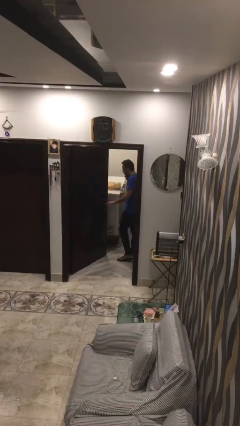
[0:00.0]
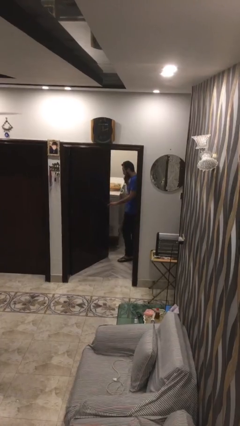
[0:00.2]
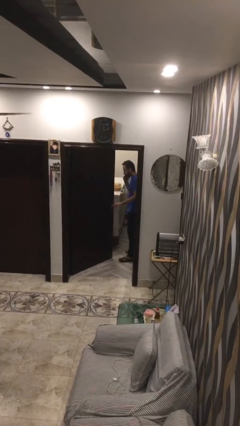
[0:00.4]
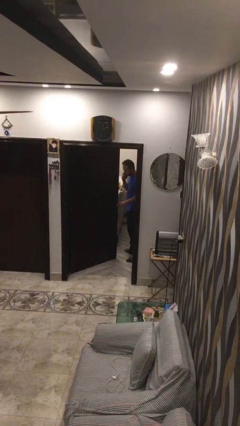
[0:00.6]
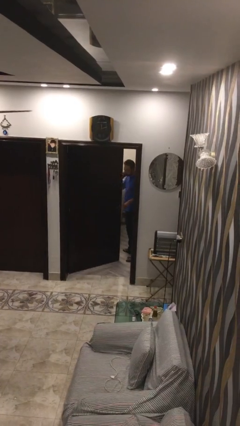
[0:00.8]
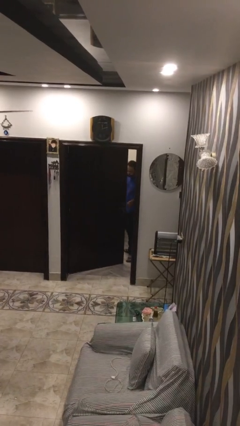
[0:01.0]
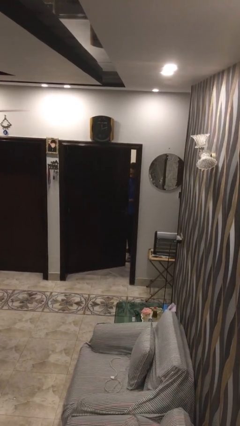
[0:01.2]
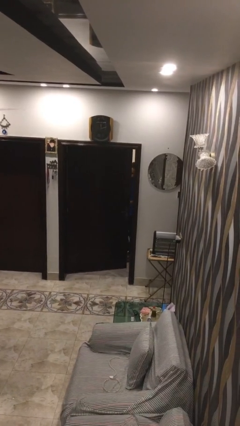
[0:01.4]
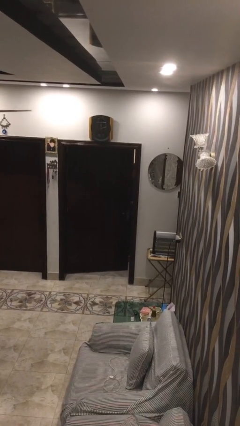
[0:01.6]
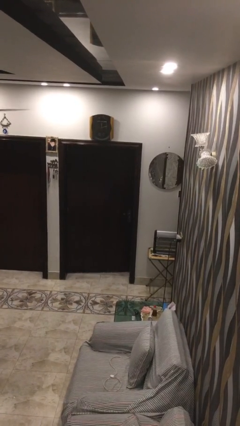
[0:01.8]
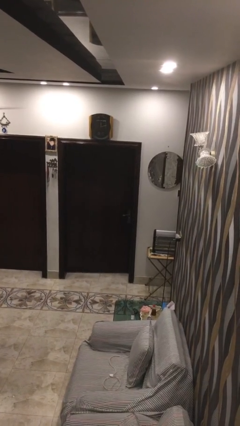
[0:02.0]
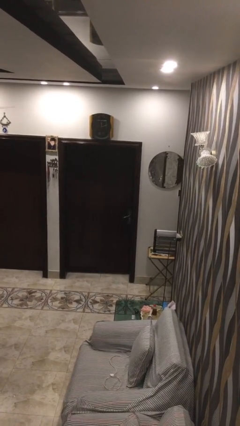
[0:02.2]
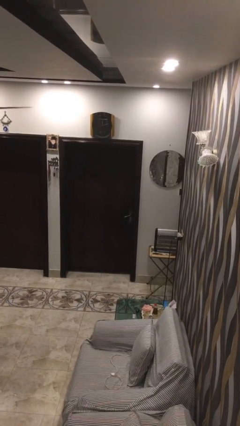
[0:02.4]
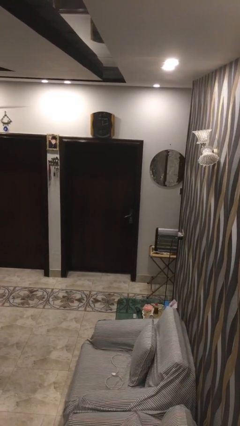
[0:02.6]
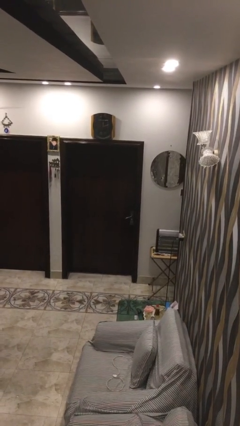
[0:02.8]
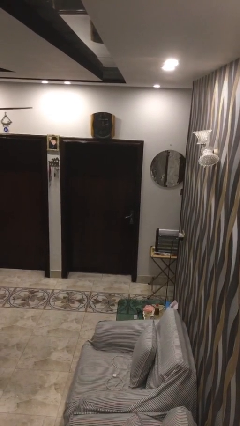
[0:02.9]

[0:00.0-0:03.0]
person closes facility door

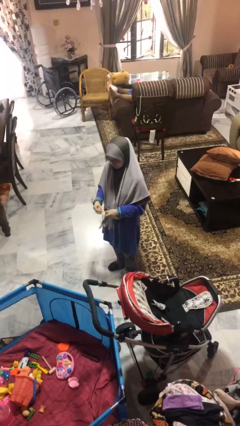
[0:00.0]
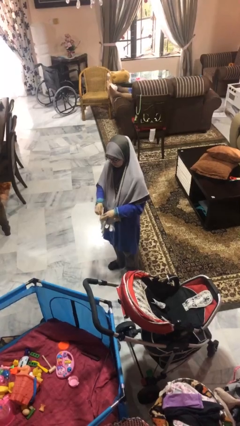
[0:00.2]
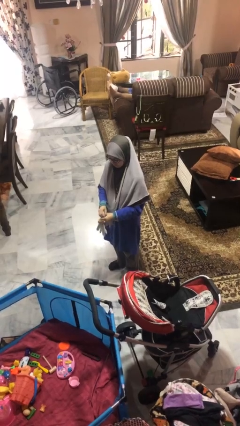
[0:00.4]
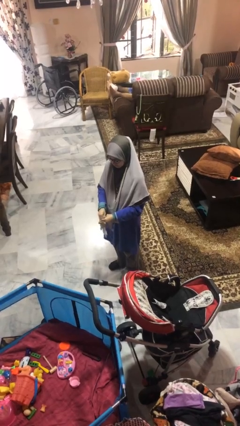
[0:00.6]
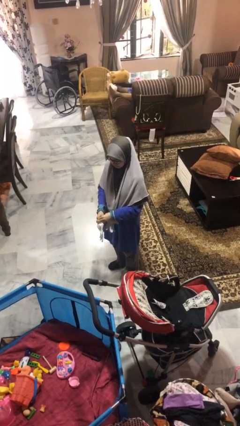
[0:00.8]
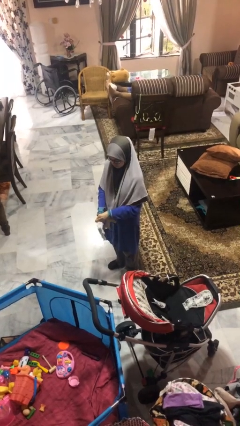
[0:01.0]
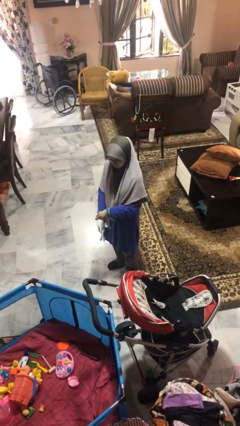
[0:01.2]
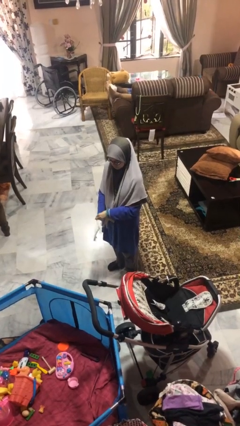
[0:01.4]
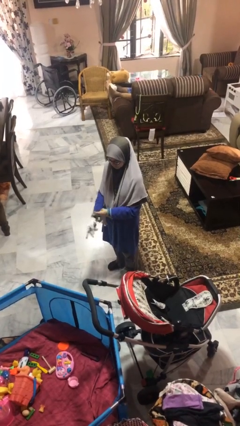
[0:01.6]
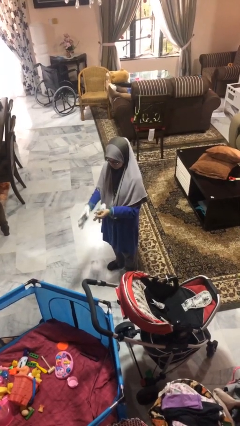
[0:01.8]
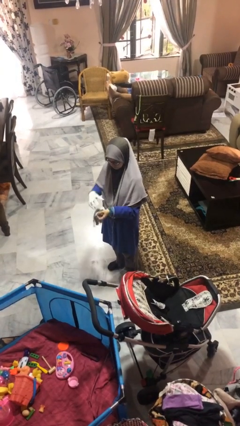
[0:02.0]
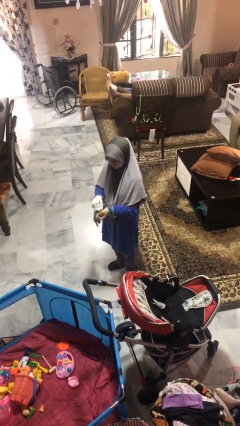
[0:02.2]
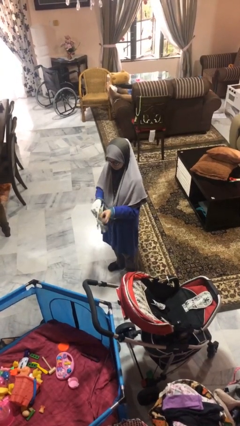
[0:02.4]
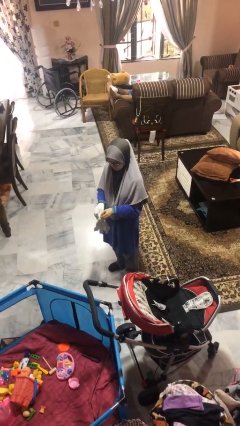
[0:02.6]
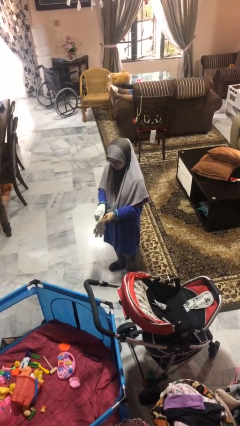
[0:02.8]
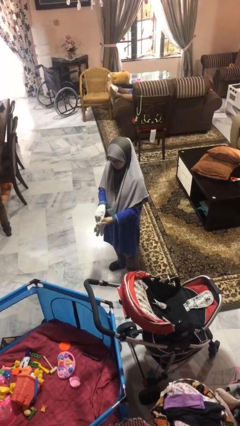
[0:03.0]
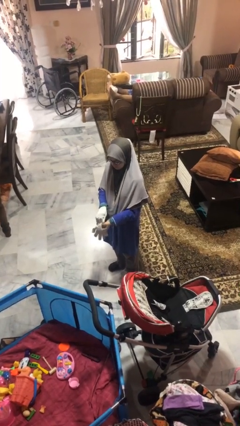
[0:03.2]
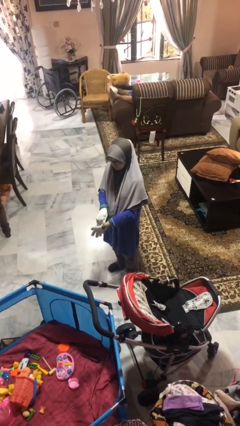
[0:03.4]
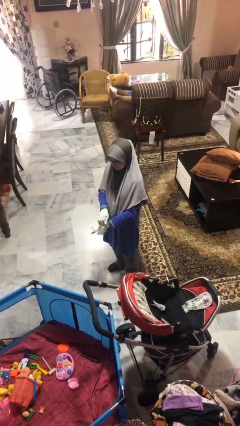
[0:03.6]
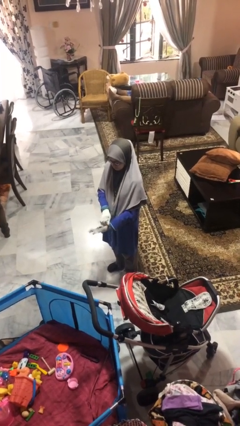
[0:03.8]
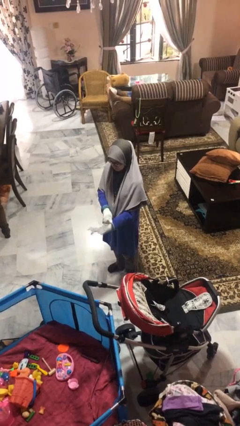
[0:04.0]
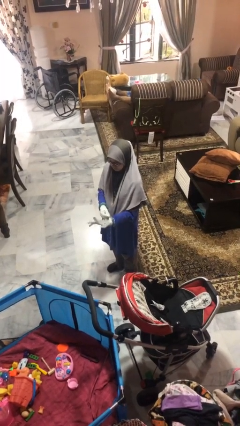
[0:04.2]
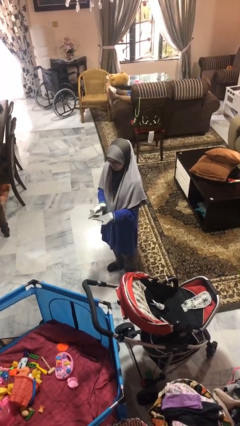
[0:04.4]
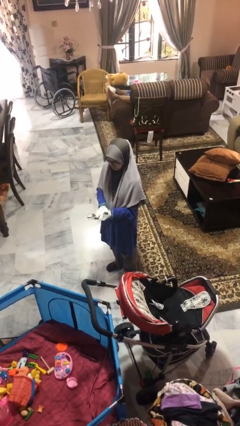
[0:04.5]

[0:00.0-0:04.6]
person puts on gloves

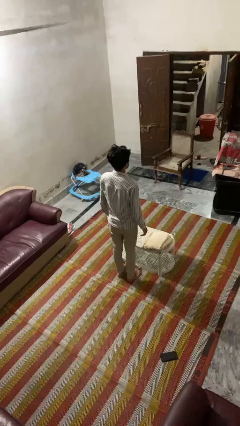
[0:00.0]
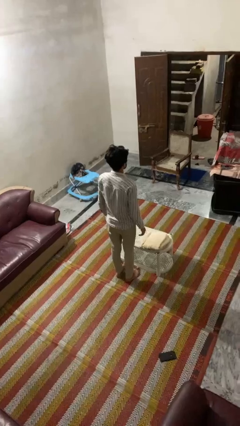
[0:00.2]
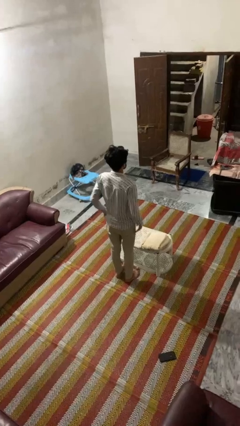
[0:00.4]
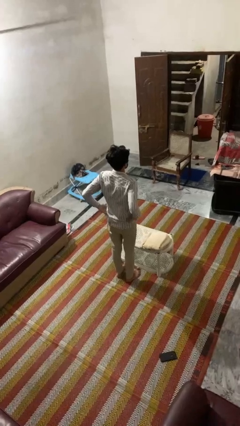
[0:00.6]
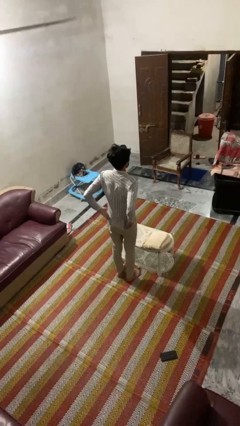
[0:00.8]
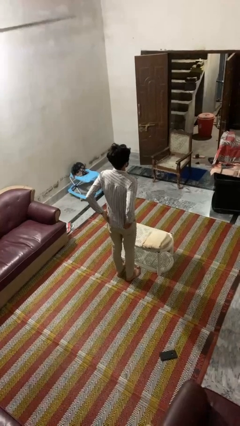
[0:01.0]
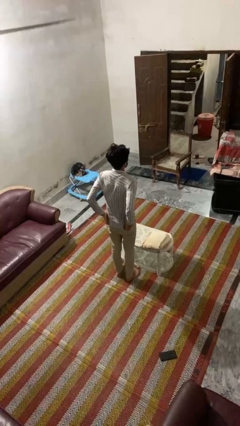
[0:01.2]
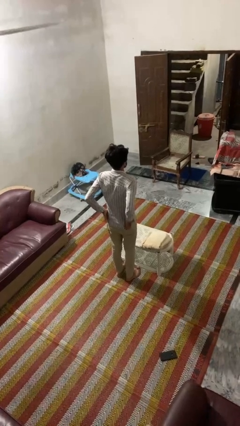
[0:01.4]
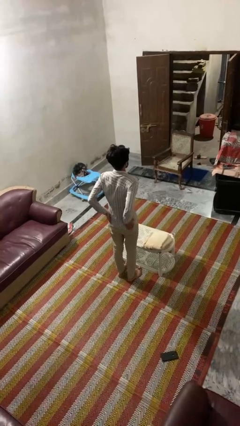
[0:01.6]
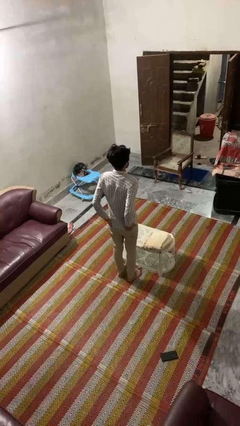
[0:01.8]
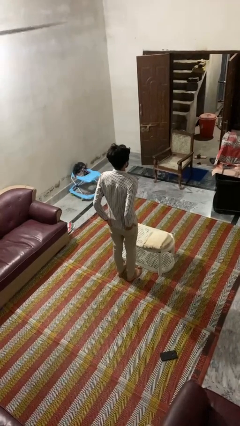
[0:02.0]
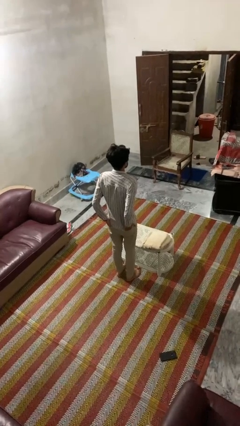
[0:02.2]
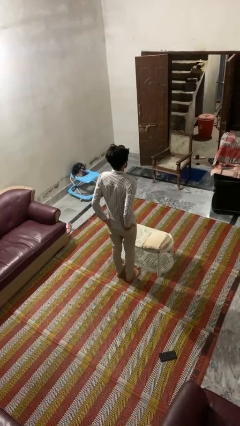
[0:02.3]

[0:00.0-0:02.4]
person puts hands in back pockets

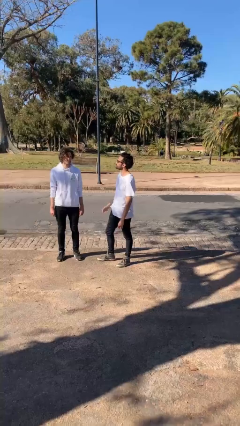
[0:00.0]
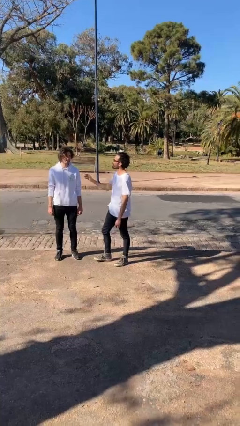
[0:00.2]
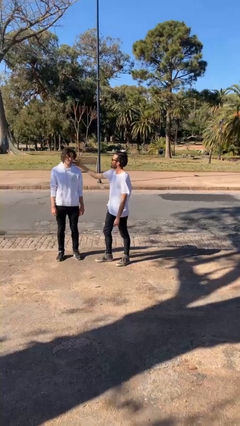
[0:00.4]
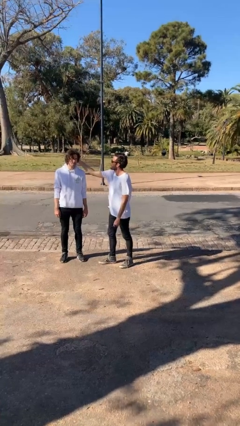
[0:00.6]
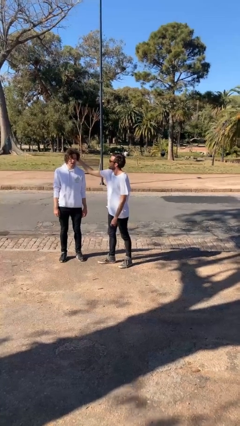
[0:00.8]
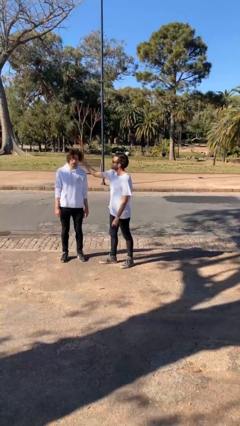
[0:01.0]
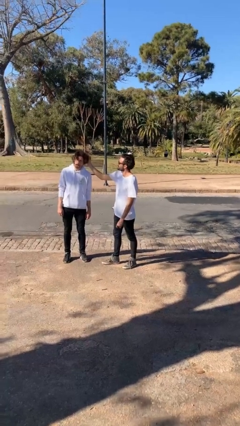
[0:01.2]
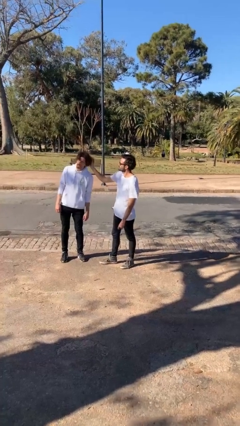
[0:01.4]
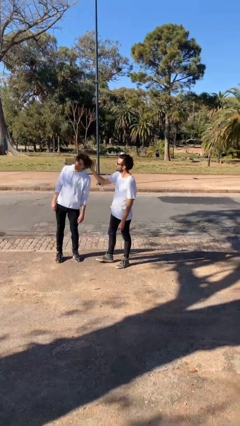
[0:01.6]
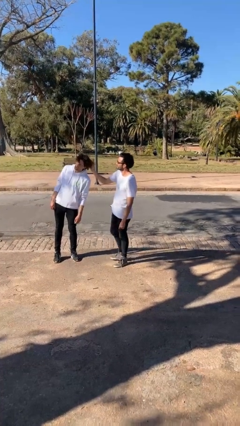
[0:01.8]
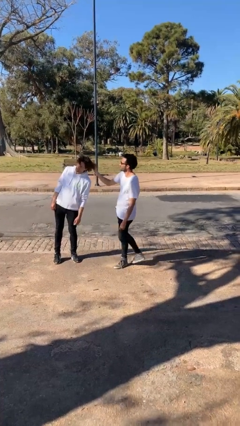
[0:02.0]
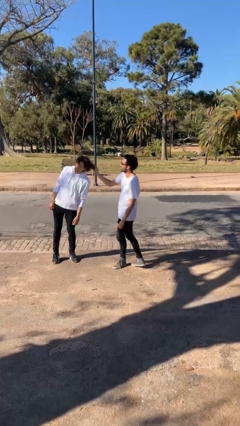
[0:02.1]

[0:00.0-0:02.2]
person grabs person by hair

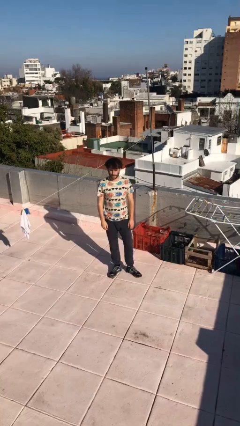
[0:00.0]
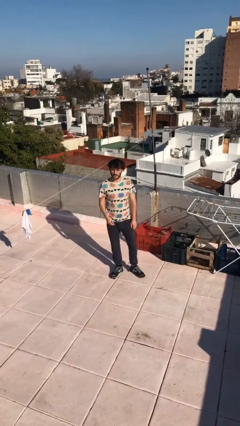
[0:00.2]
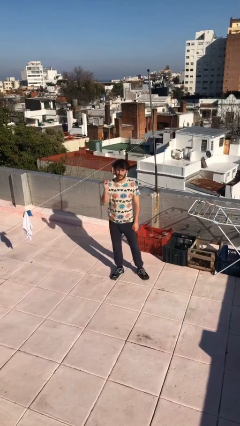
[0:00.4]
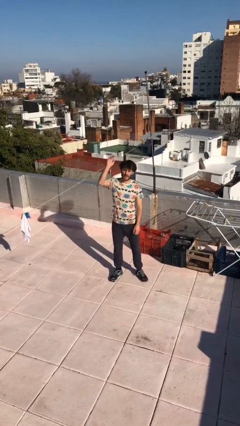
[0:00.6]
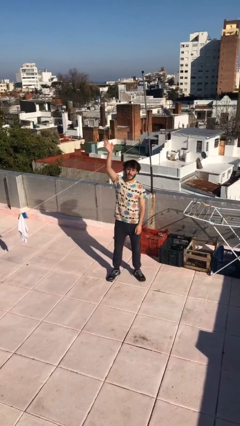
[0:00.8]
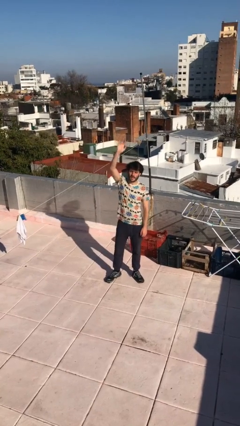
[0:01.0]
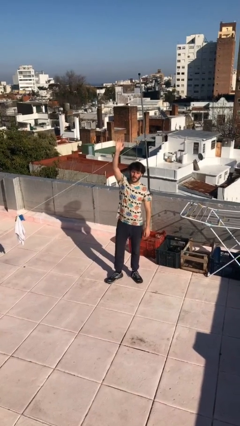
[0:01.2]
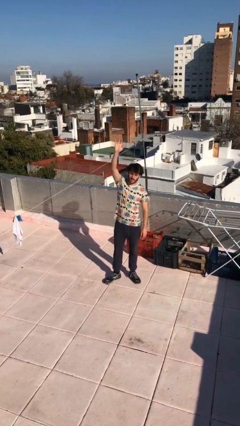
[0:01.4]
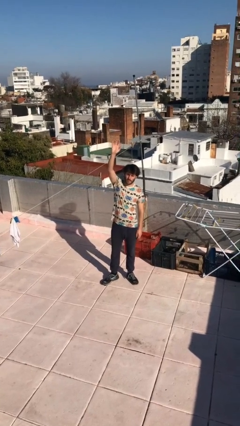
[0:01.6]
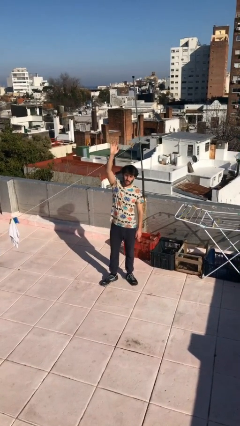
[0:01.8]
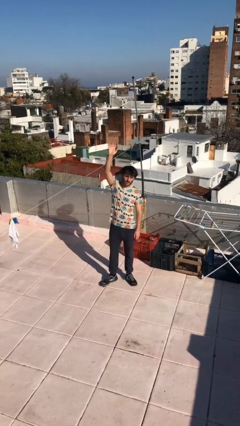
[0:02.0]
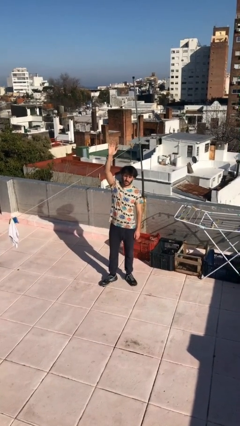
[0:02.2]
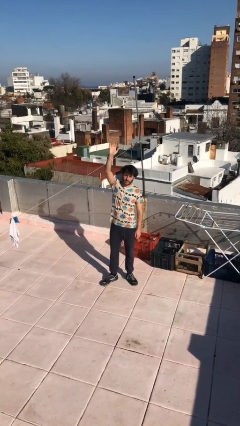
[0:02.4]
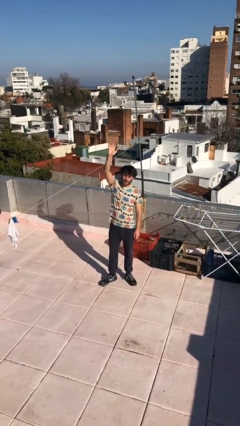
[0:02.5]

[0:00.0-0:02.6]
person gestures raise hand

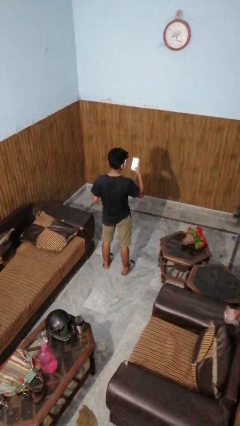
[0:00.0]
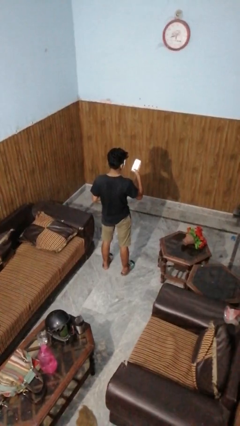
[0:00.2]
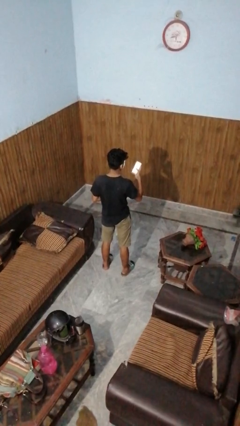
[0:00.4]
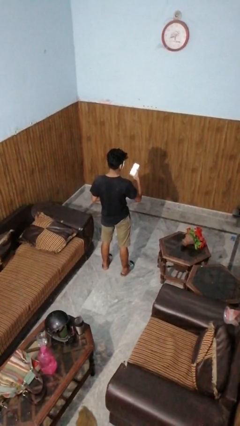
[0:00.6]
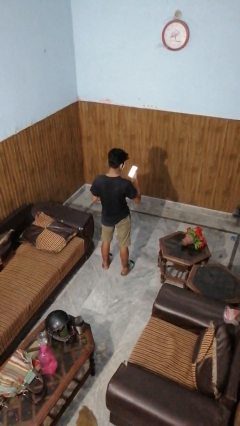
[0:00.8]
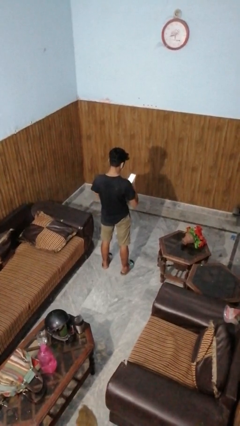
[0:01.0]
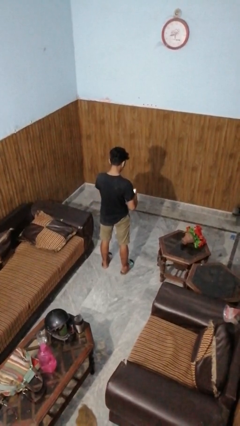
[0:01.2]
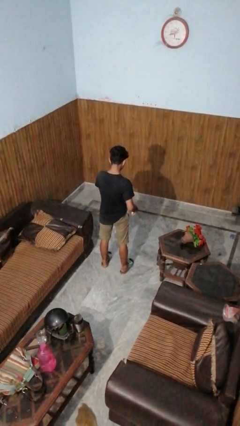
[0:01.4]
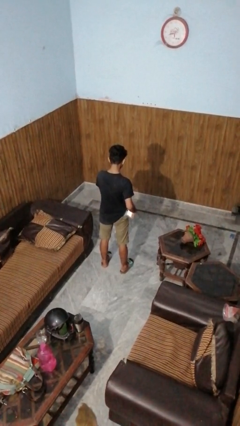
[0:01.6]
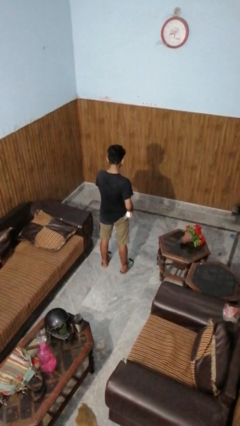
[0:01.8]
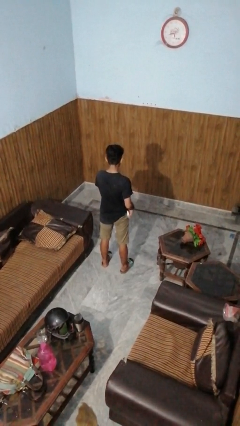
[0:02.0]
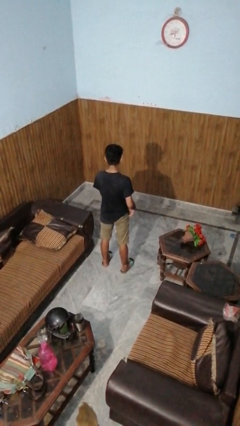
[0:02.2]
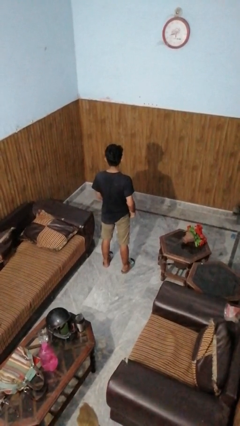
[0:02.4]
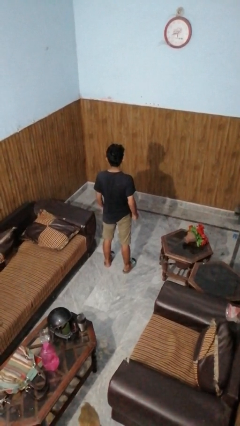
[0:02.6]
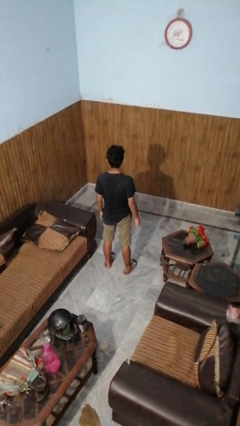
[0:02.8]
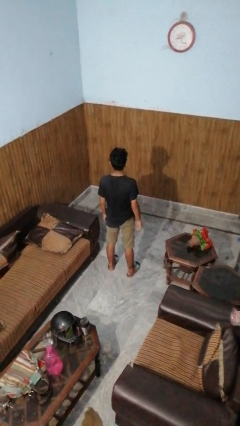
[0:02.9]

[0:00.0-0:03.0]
person puts phone into pocket
